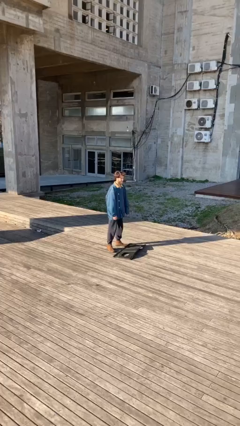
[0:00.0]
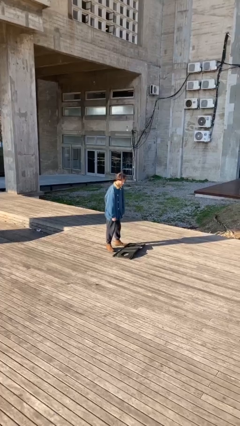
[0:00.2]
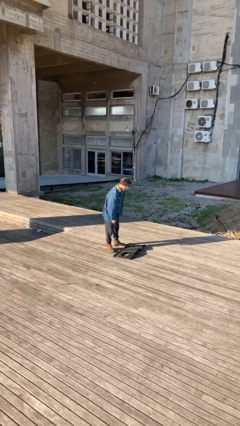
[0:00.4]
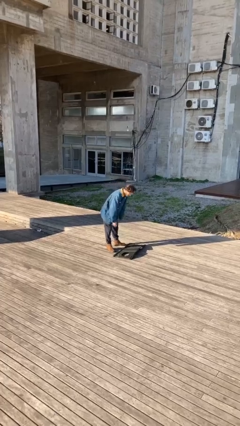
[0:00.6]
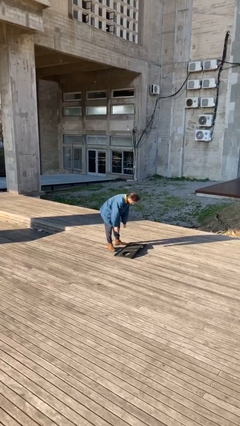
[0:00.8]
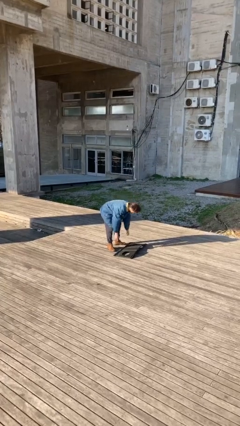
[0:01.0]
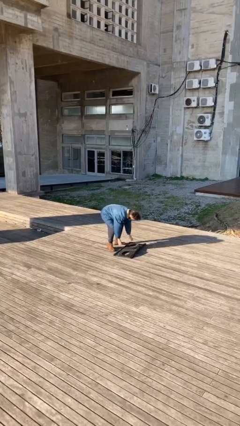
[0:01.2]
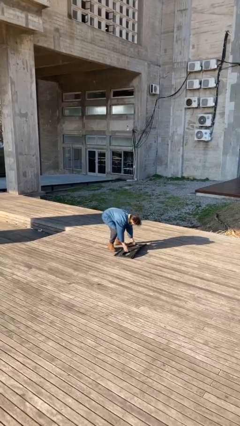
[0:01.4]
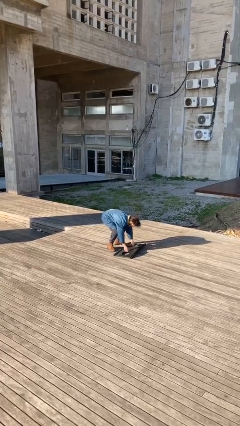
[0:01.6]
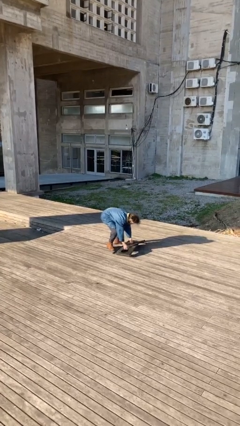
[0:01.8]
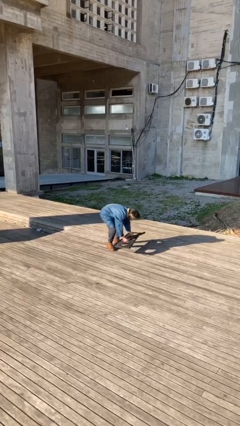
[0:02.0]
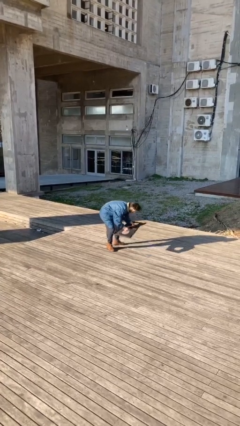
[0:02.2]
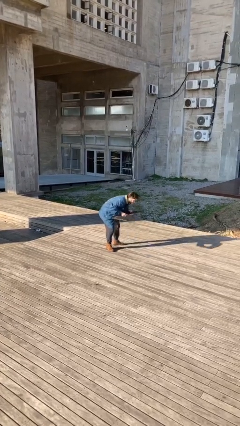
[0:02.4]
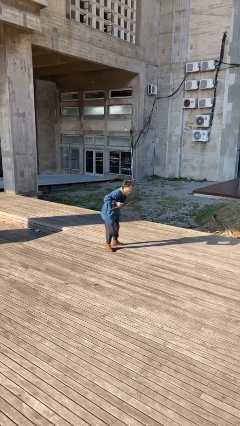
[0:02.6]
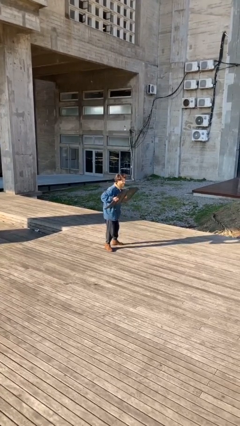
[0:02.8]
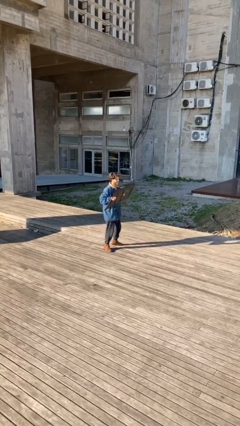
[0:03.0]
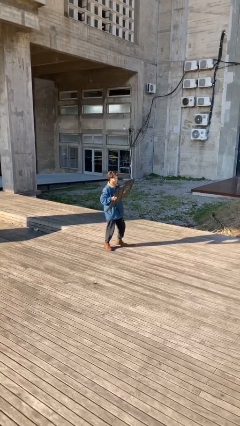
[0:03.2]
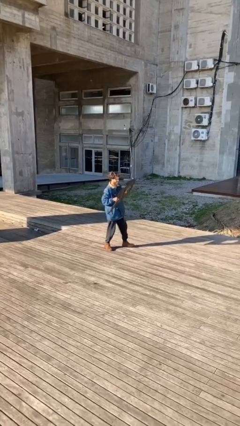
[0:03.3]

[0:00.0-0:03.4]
person picks up object from floor

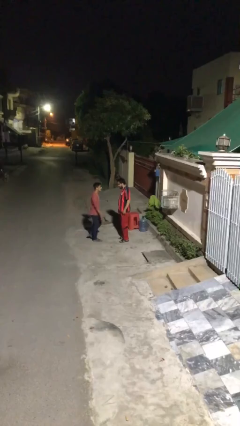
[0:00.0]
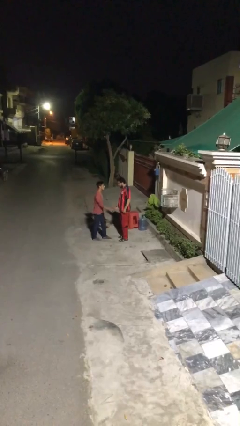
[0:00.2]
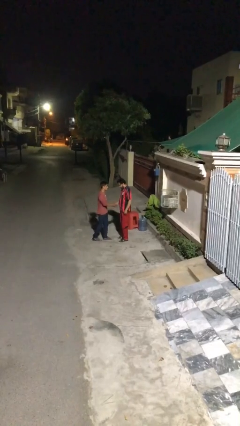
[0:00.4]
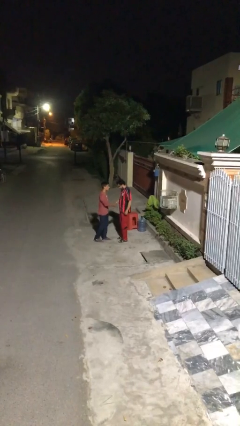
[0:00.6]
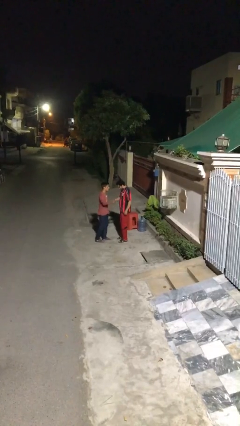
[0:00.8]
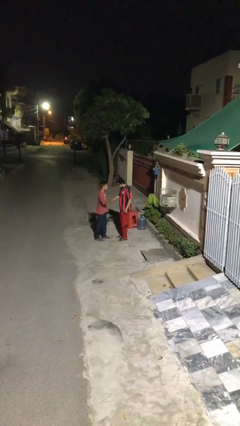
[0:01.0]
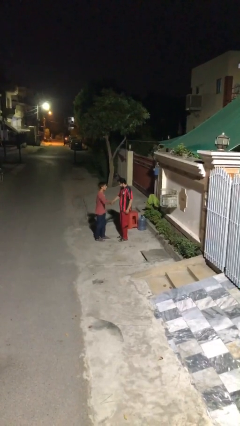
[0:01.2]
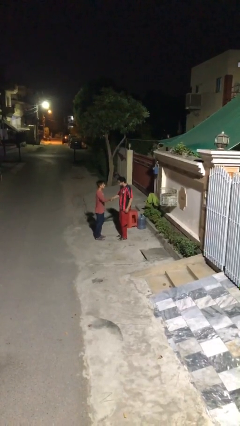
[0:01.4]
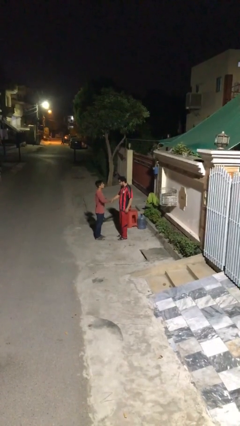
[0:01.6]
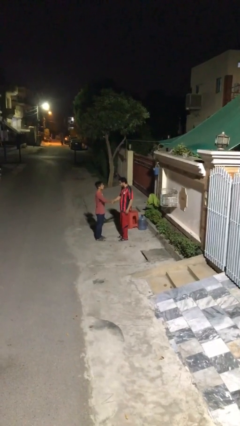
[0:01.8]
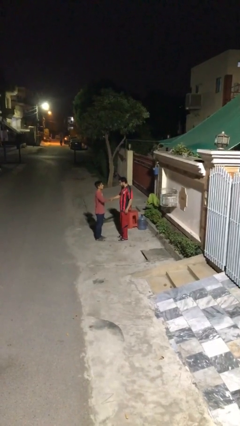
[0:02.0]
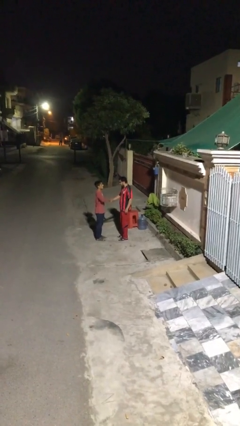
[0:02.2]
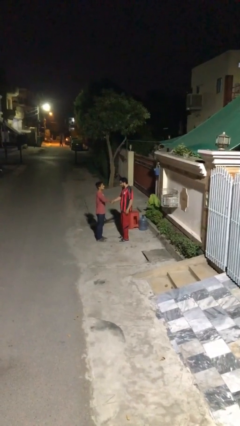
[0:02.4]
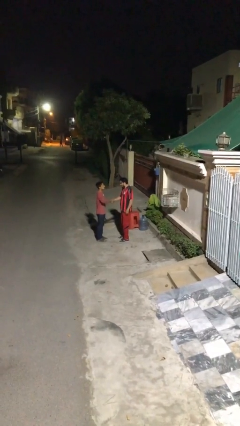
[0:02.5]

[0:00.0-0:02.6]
person shakes hand

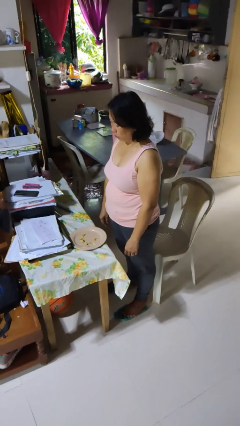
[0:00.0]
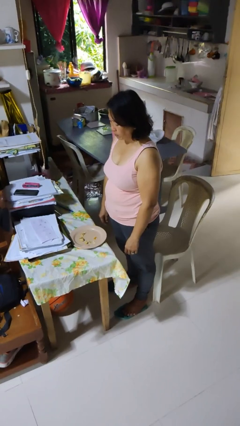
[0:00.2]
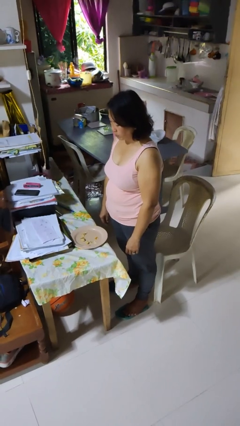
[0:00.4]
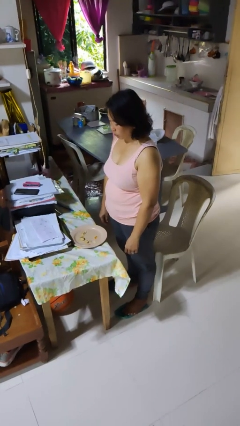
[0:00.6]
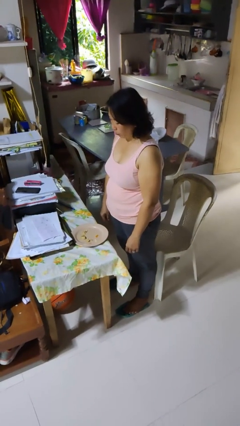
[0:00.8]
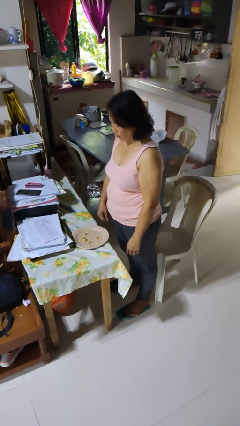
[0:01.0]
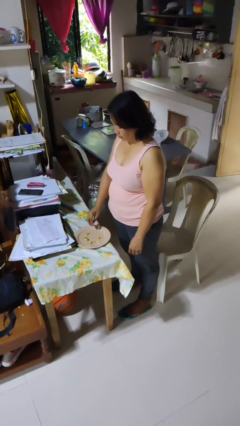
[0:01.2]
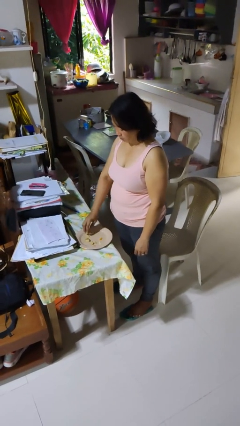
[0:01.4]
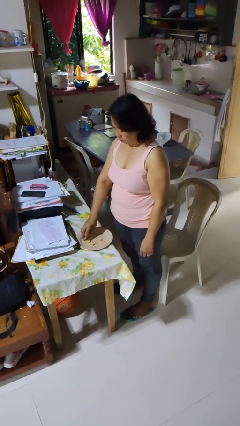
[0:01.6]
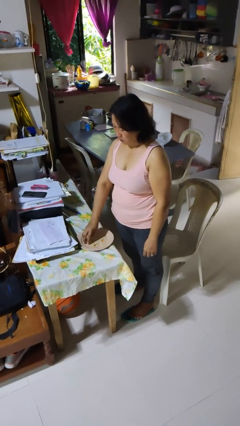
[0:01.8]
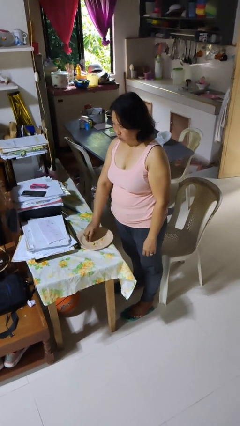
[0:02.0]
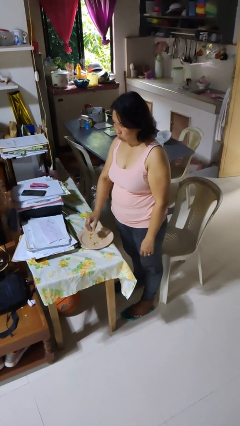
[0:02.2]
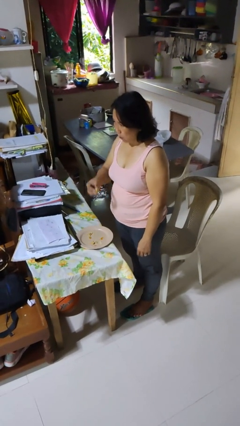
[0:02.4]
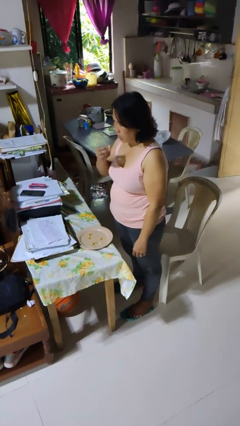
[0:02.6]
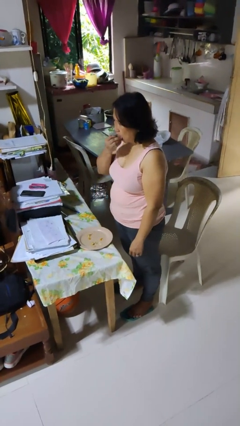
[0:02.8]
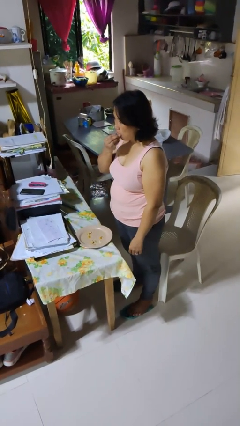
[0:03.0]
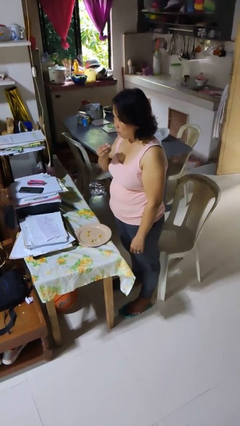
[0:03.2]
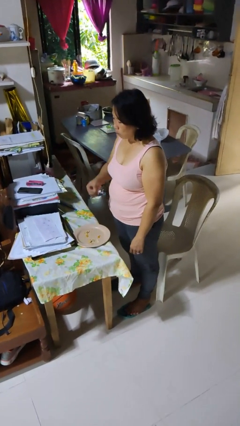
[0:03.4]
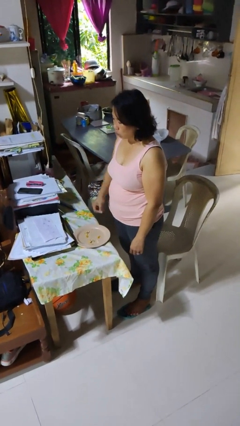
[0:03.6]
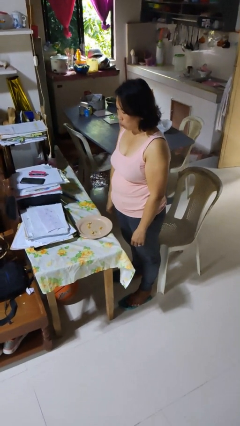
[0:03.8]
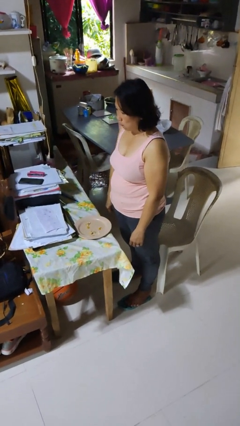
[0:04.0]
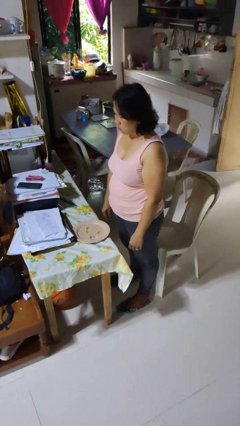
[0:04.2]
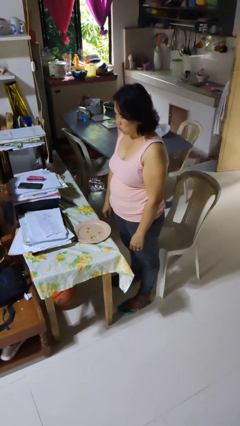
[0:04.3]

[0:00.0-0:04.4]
person eats with hands

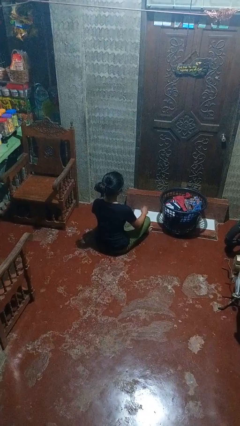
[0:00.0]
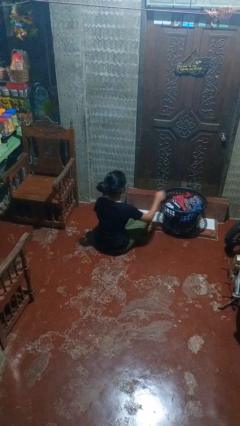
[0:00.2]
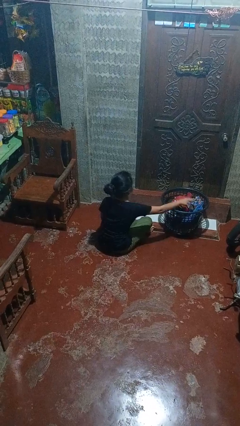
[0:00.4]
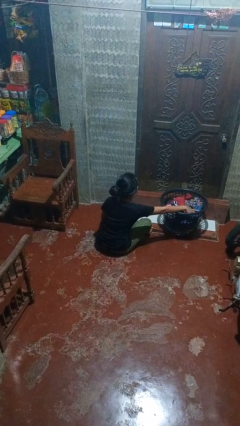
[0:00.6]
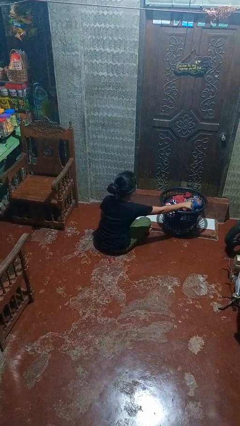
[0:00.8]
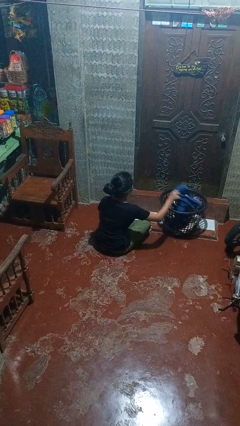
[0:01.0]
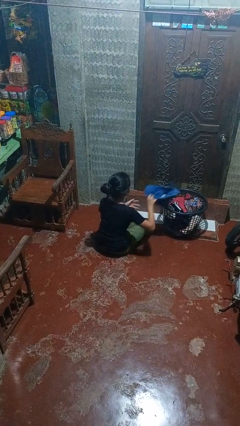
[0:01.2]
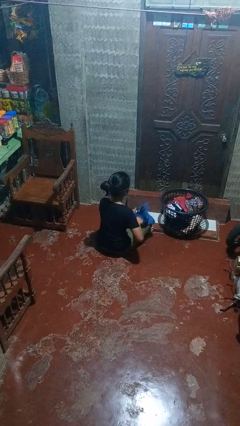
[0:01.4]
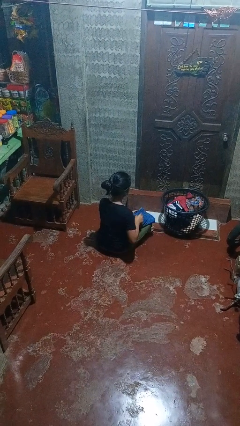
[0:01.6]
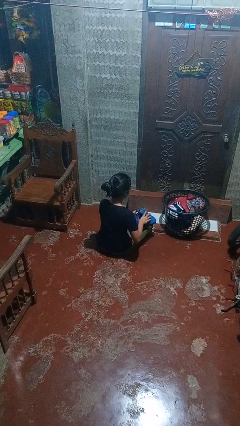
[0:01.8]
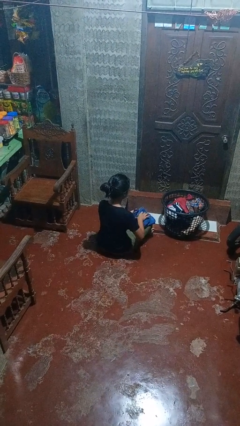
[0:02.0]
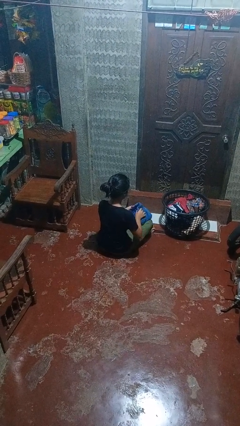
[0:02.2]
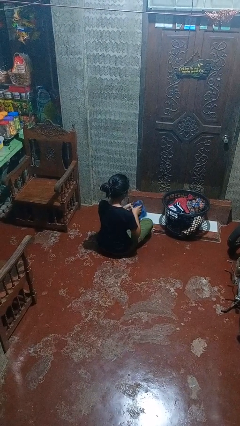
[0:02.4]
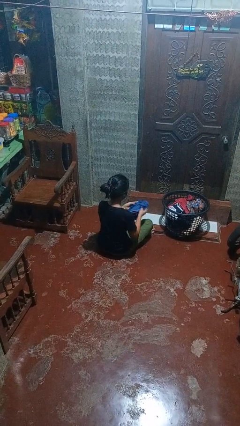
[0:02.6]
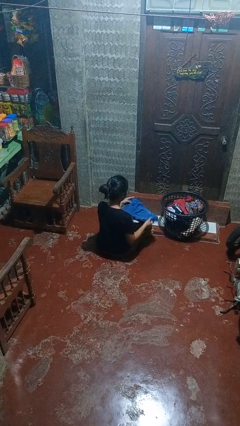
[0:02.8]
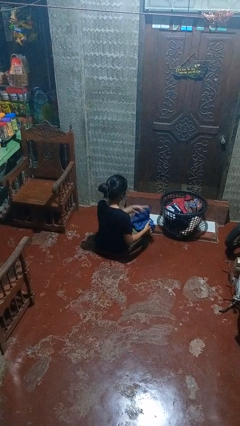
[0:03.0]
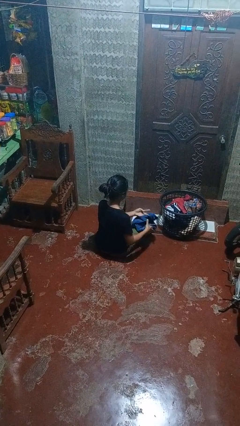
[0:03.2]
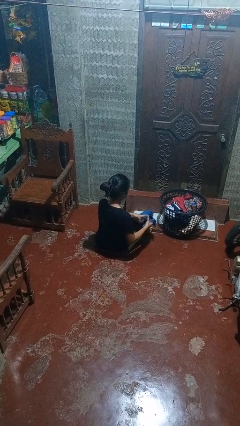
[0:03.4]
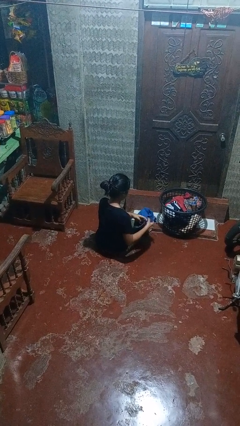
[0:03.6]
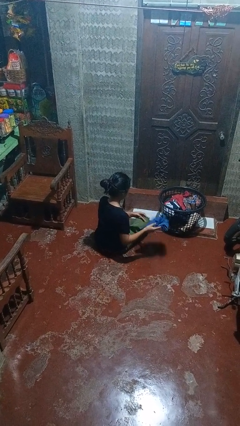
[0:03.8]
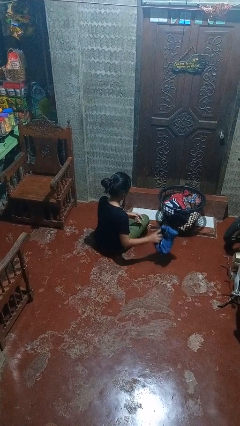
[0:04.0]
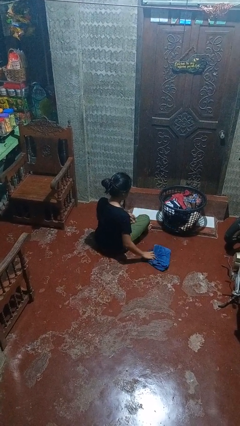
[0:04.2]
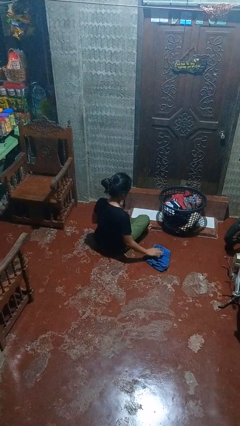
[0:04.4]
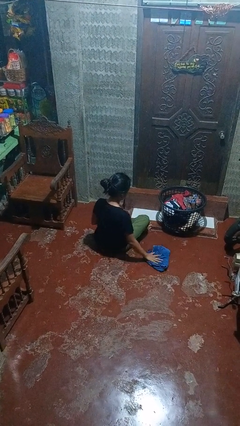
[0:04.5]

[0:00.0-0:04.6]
person folds pants

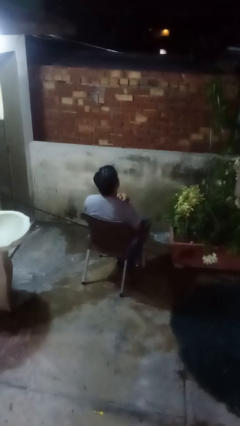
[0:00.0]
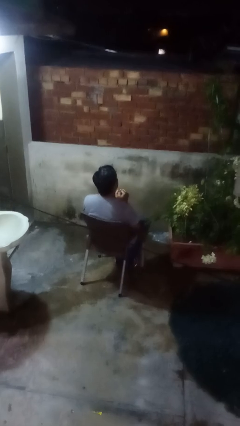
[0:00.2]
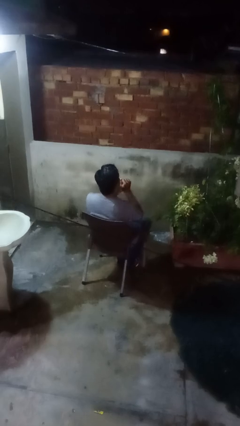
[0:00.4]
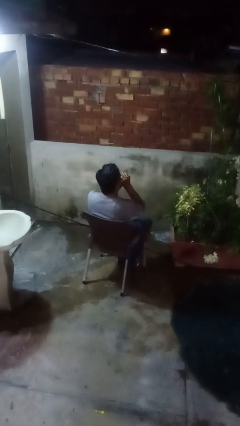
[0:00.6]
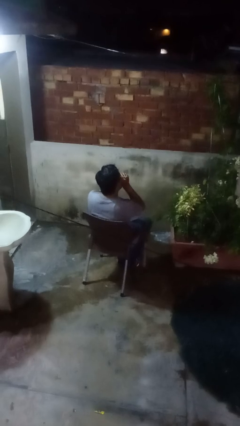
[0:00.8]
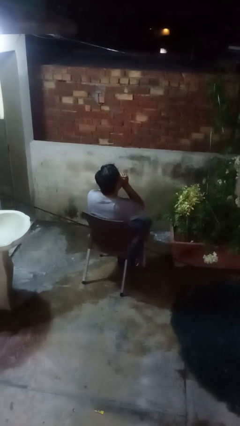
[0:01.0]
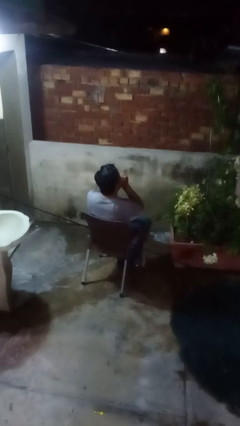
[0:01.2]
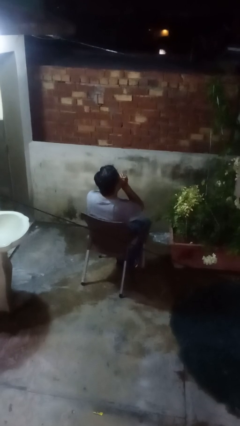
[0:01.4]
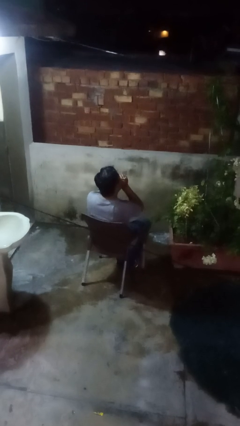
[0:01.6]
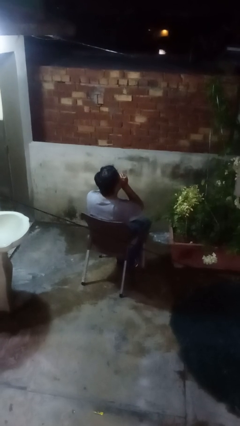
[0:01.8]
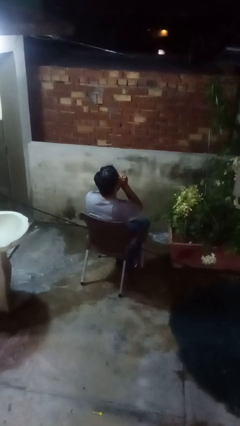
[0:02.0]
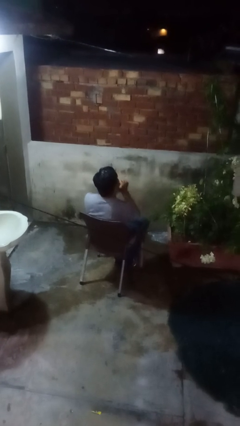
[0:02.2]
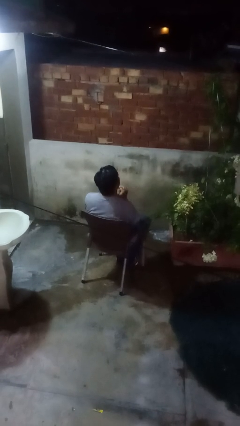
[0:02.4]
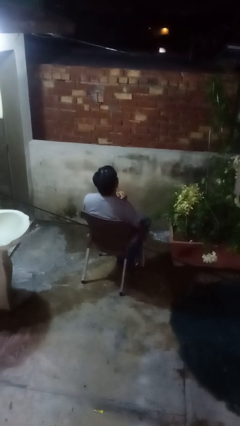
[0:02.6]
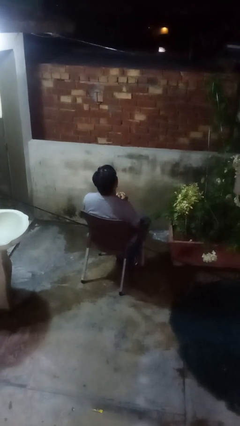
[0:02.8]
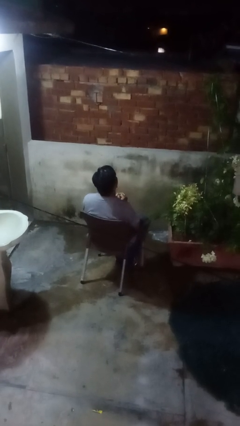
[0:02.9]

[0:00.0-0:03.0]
person blows into hands
